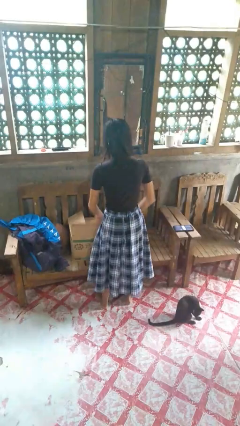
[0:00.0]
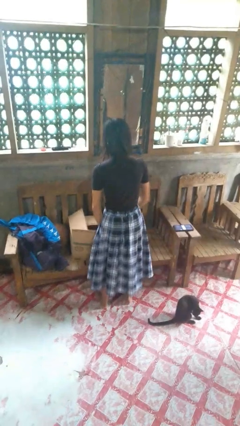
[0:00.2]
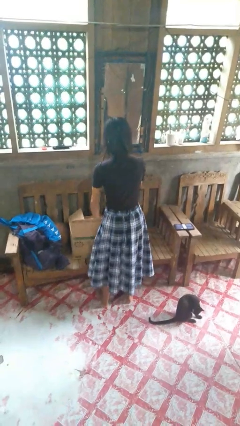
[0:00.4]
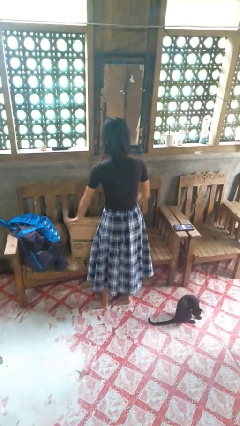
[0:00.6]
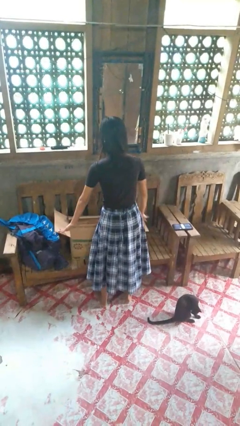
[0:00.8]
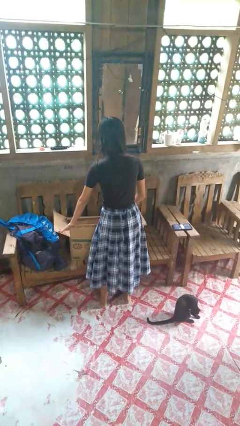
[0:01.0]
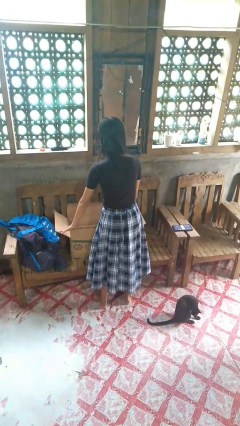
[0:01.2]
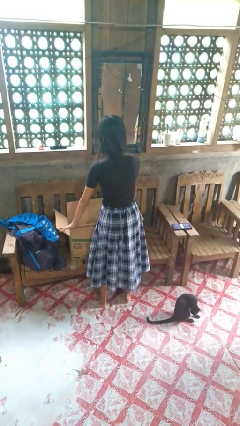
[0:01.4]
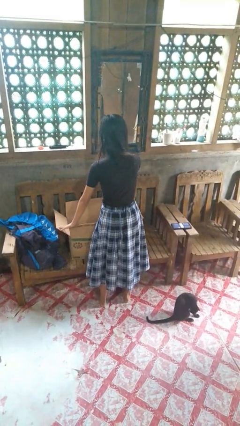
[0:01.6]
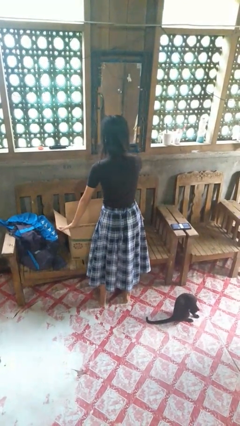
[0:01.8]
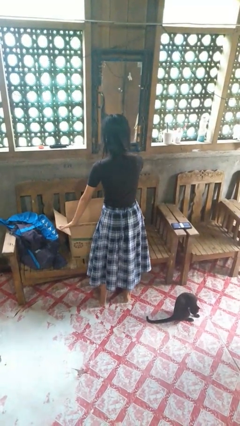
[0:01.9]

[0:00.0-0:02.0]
person opens box

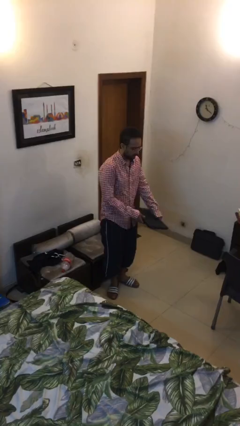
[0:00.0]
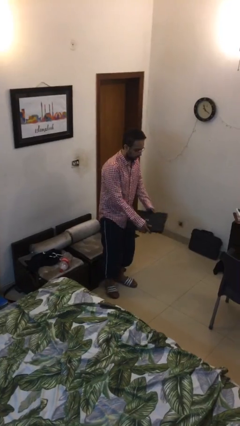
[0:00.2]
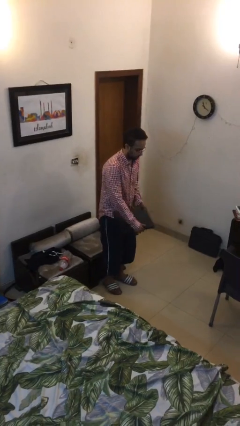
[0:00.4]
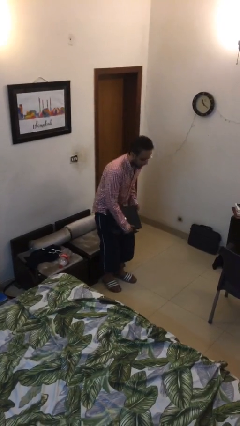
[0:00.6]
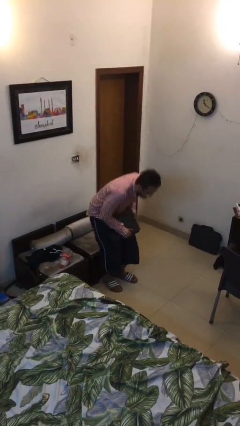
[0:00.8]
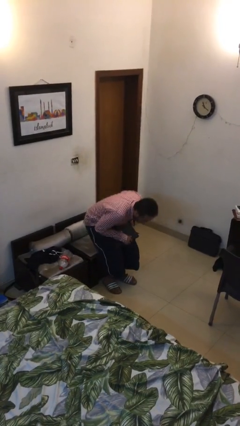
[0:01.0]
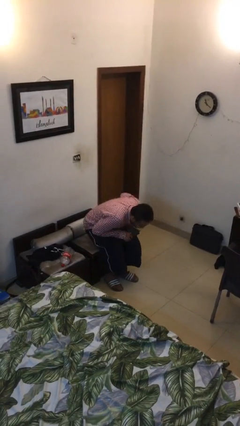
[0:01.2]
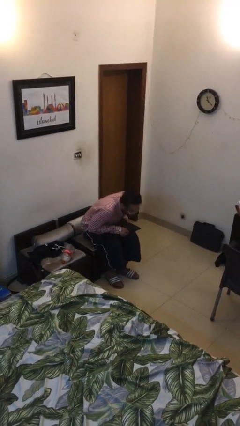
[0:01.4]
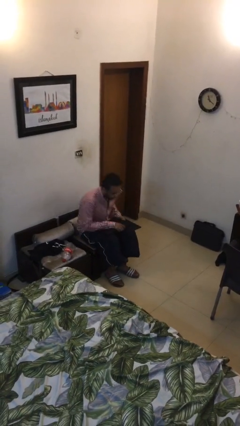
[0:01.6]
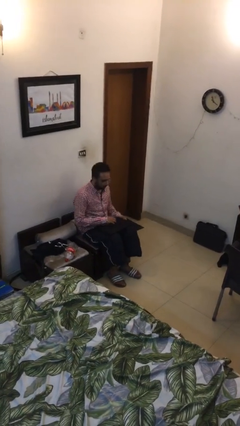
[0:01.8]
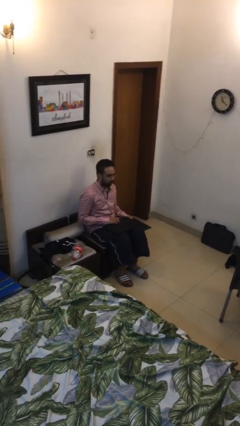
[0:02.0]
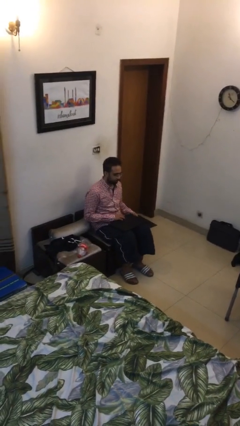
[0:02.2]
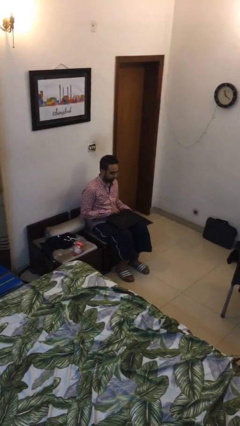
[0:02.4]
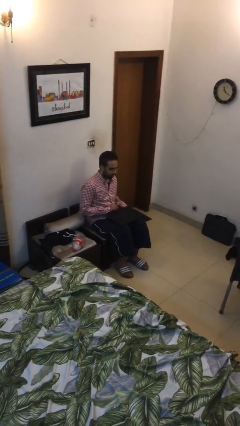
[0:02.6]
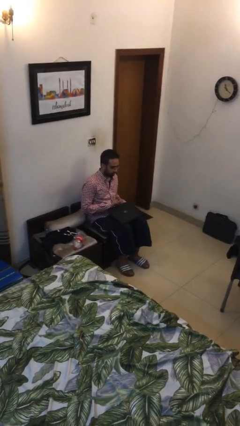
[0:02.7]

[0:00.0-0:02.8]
person sits down

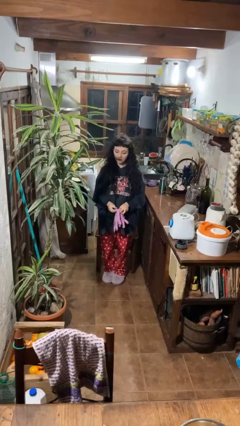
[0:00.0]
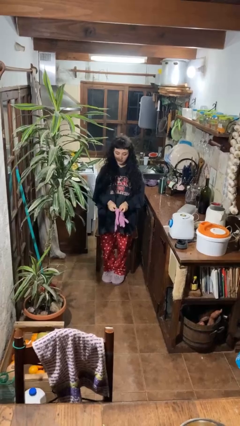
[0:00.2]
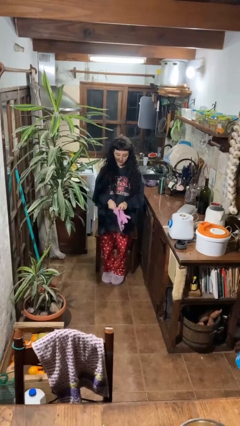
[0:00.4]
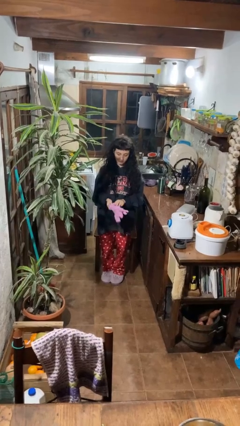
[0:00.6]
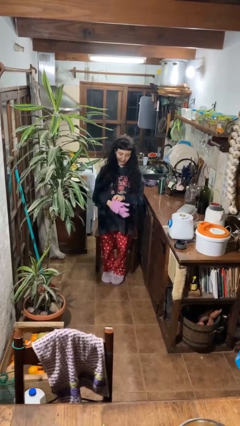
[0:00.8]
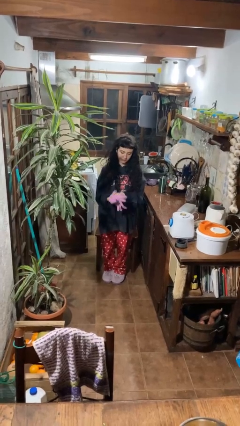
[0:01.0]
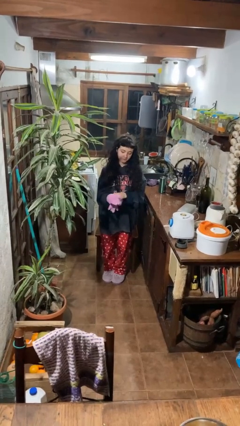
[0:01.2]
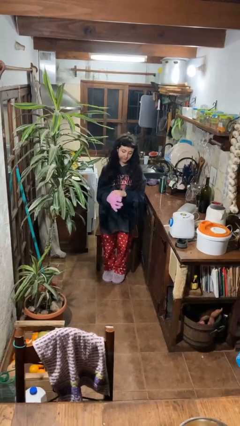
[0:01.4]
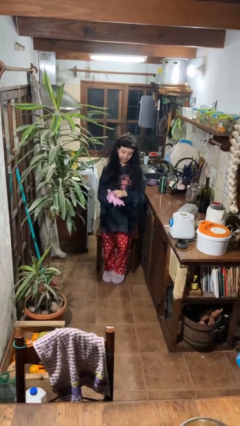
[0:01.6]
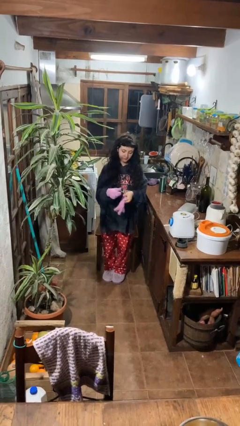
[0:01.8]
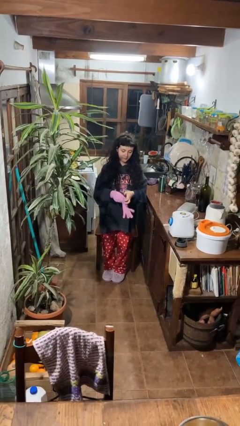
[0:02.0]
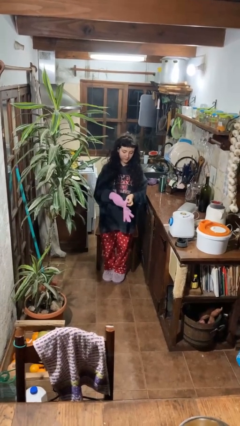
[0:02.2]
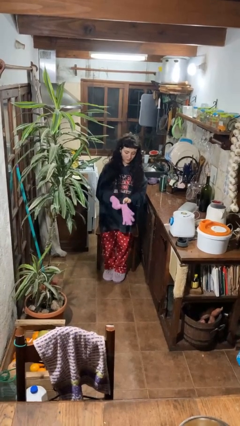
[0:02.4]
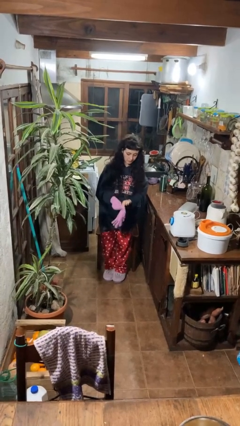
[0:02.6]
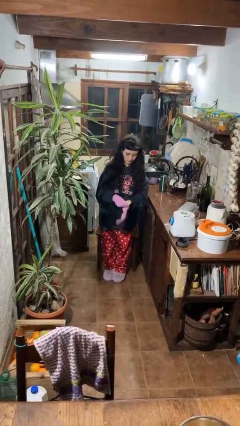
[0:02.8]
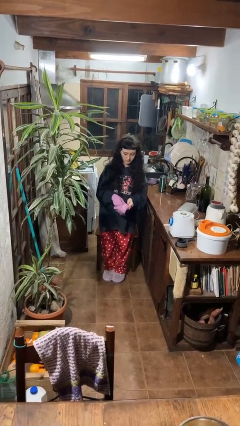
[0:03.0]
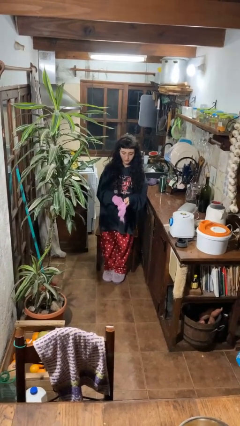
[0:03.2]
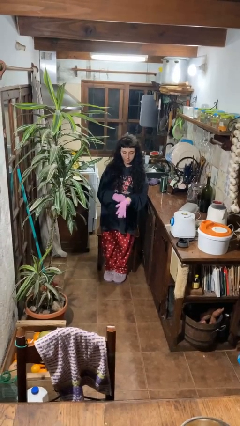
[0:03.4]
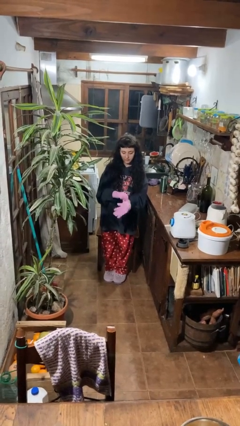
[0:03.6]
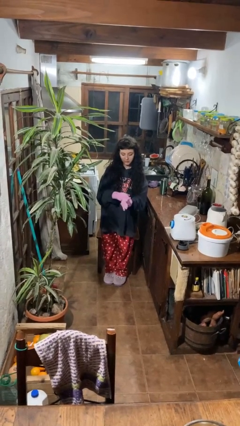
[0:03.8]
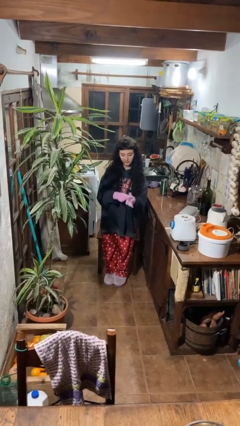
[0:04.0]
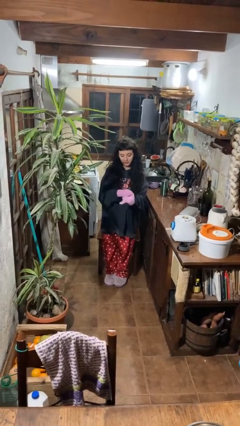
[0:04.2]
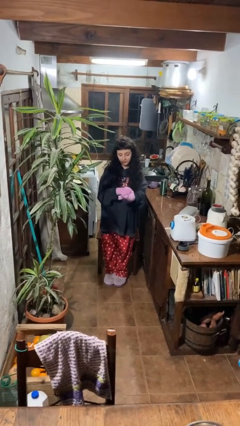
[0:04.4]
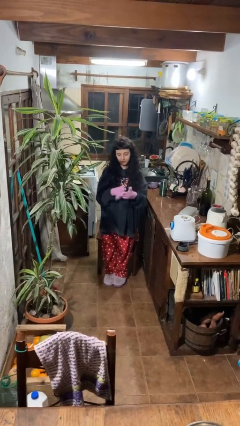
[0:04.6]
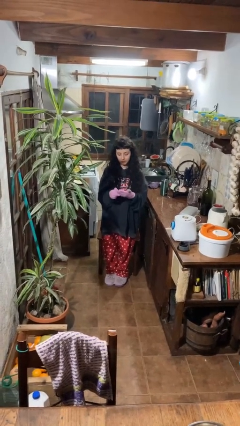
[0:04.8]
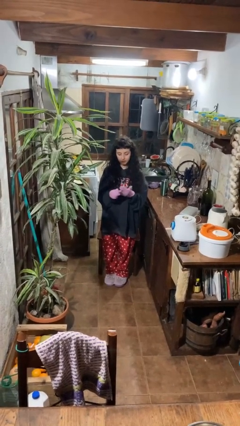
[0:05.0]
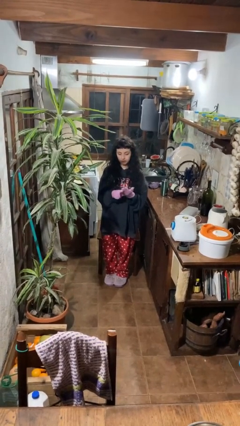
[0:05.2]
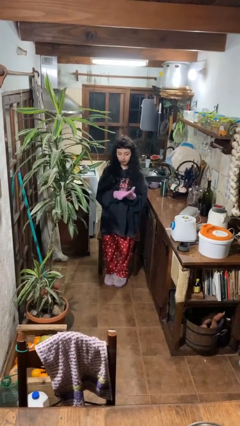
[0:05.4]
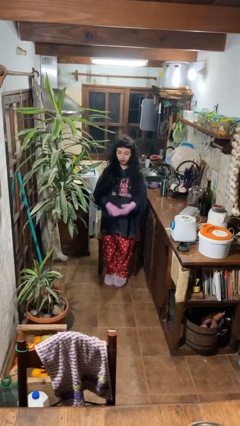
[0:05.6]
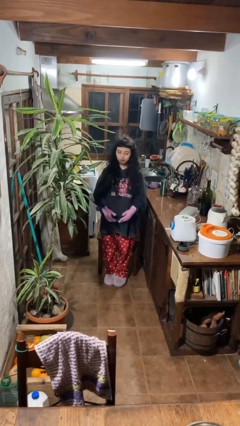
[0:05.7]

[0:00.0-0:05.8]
person puts on gloves

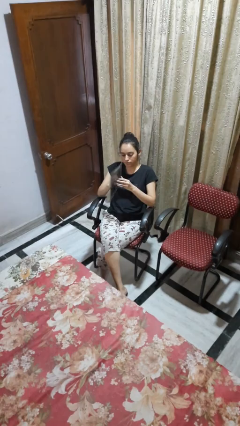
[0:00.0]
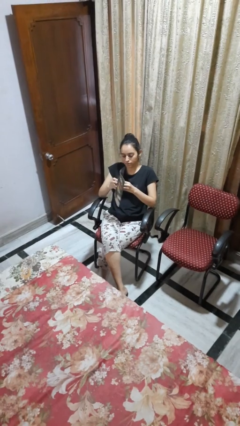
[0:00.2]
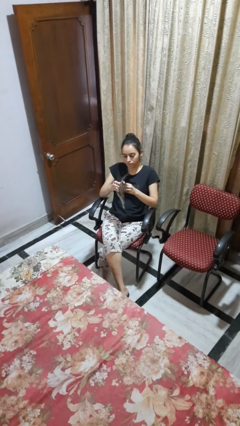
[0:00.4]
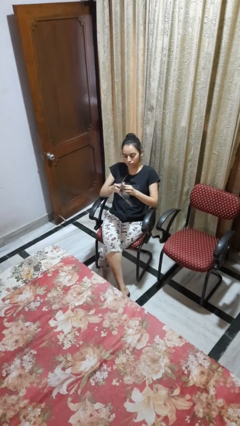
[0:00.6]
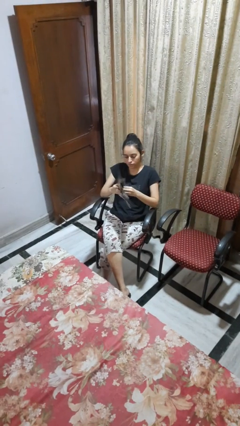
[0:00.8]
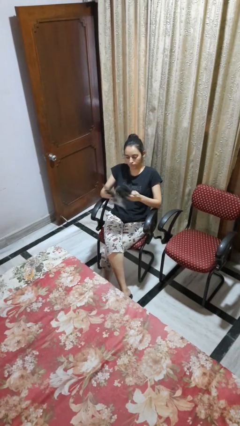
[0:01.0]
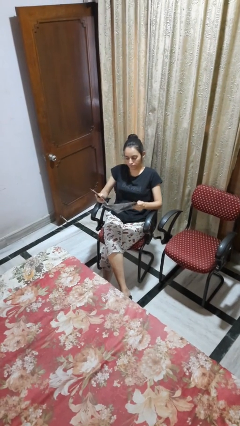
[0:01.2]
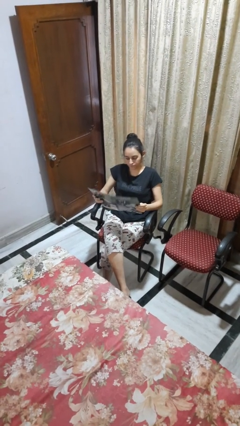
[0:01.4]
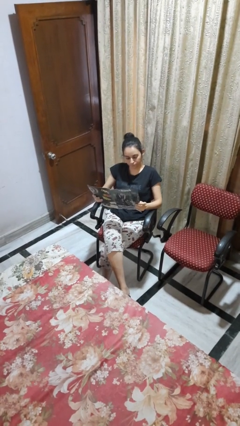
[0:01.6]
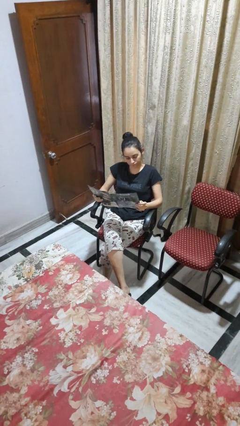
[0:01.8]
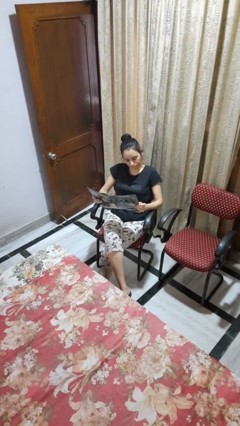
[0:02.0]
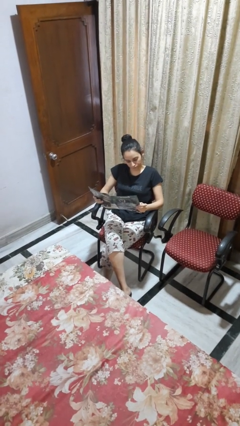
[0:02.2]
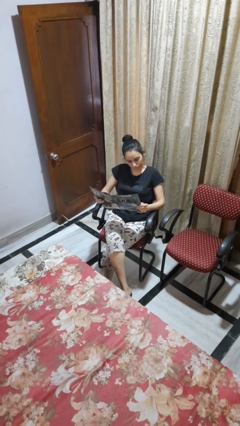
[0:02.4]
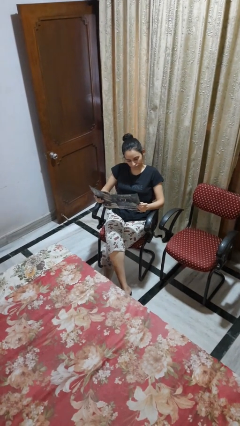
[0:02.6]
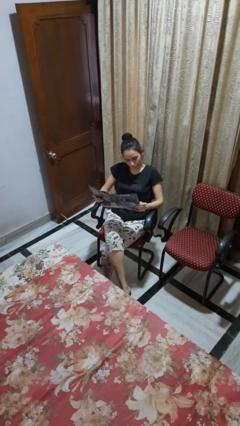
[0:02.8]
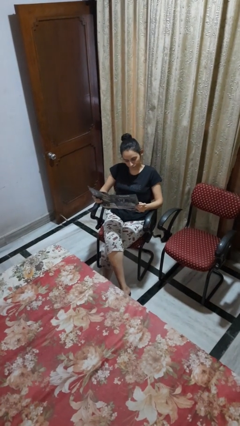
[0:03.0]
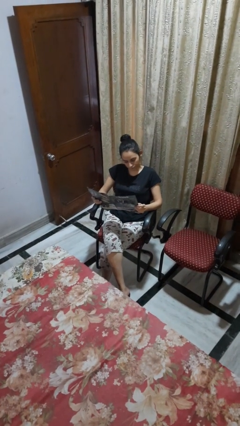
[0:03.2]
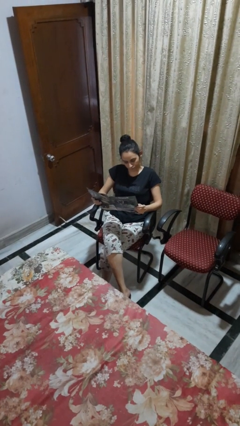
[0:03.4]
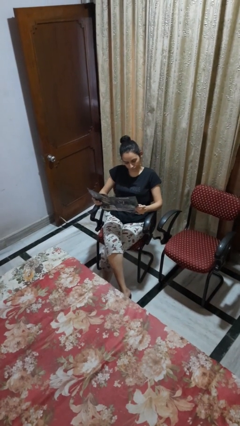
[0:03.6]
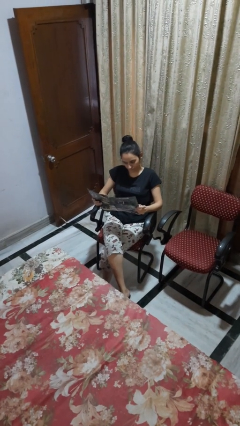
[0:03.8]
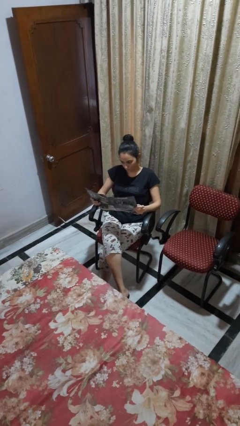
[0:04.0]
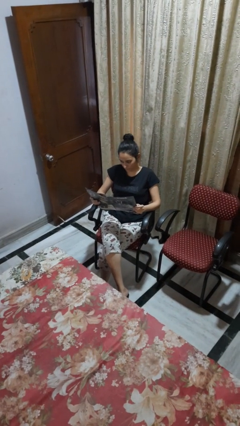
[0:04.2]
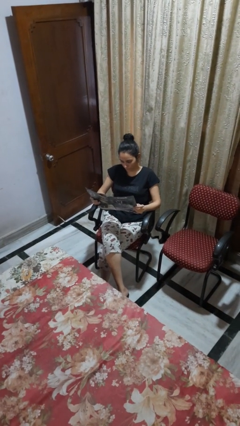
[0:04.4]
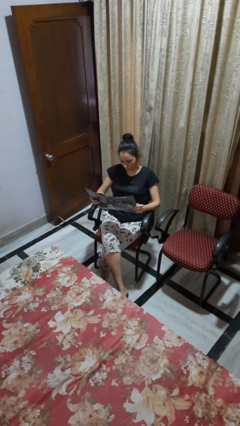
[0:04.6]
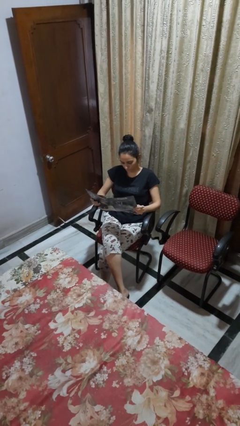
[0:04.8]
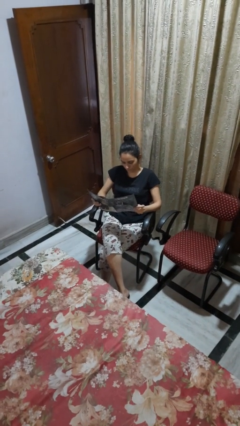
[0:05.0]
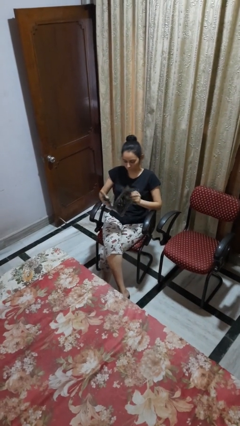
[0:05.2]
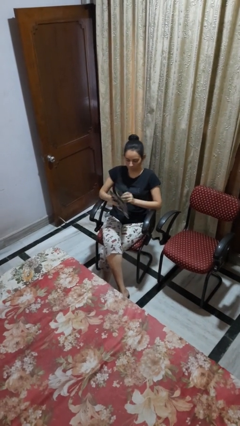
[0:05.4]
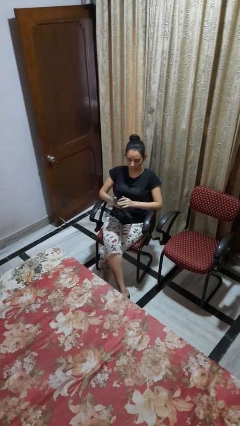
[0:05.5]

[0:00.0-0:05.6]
person reads magazine

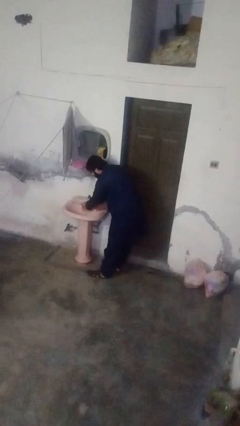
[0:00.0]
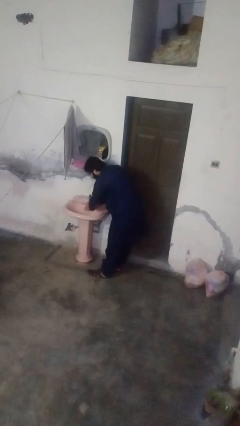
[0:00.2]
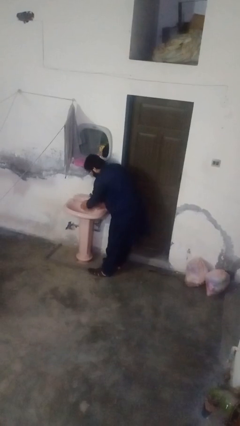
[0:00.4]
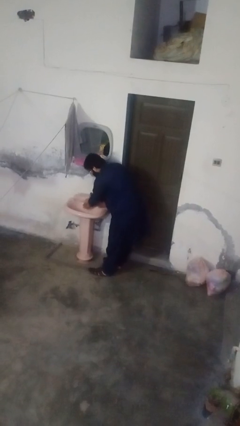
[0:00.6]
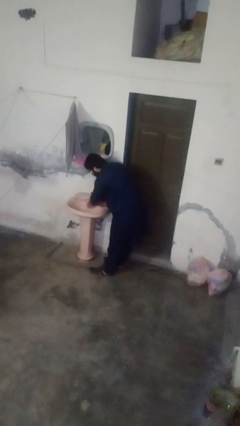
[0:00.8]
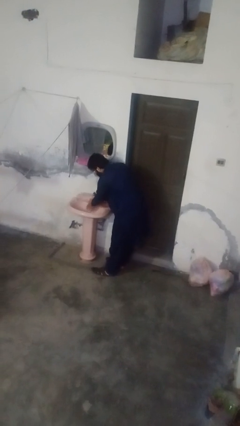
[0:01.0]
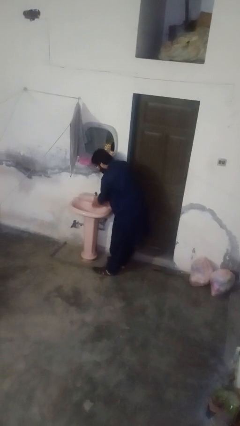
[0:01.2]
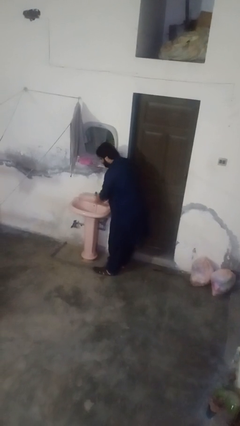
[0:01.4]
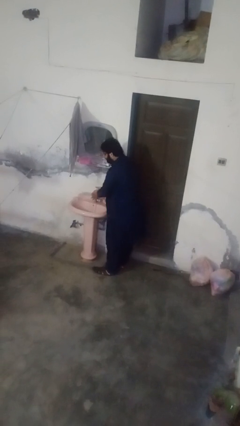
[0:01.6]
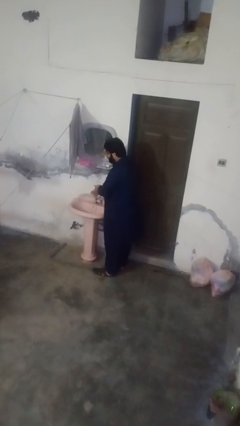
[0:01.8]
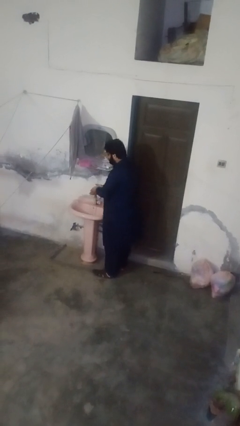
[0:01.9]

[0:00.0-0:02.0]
person washes hands
